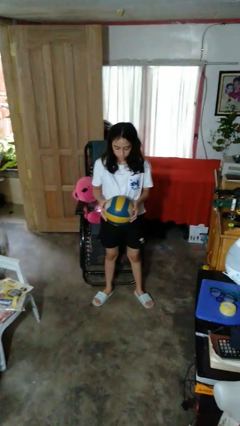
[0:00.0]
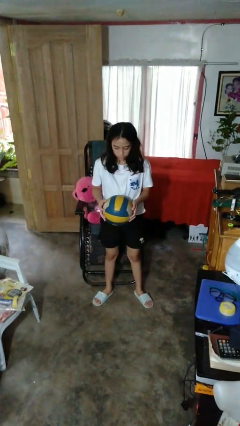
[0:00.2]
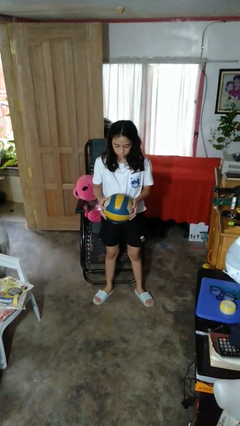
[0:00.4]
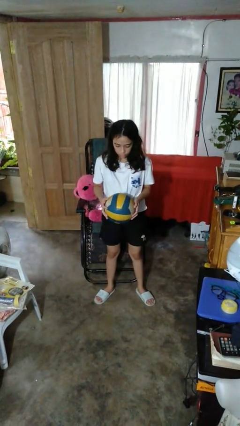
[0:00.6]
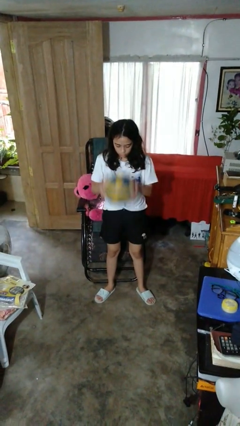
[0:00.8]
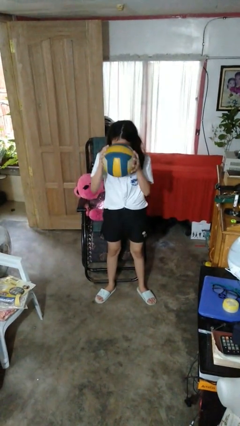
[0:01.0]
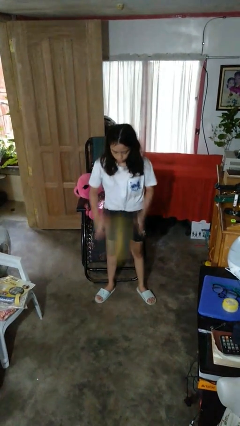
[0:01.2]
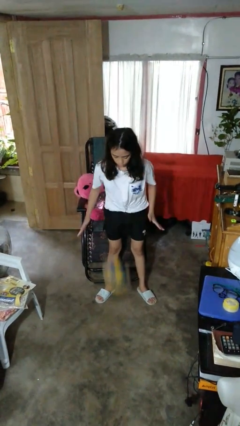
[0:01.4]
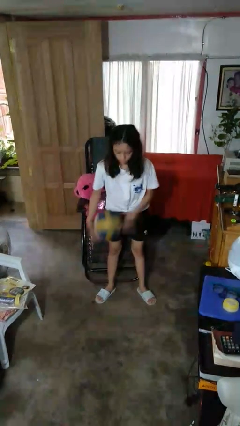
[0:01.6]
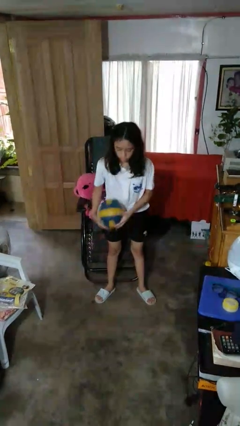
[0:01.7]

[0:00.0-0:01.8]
person bounces ball on floor

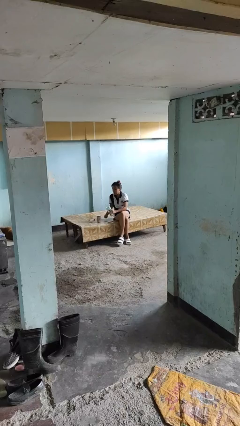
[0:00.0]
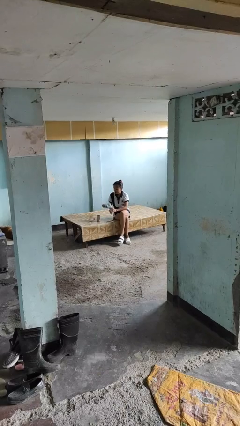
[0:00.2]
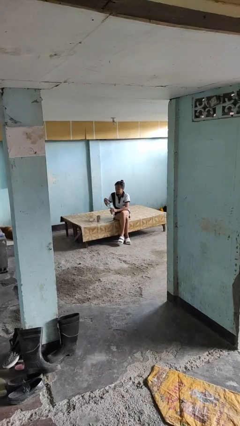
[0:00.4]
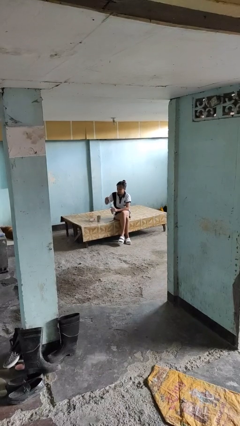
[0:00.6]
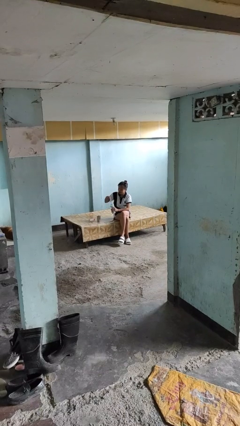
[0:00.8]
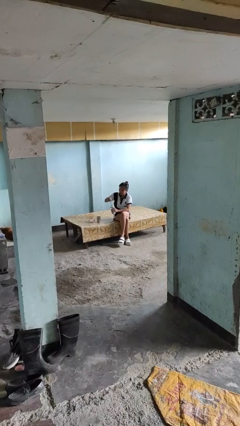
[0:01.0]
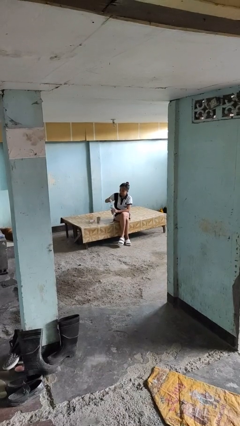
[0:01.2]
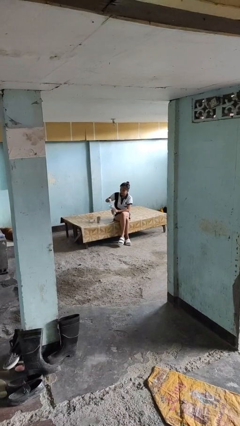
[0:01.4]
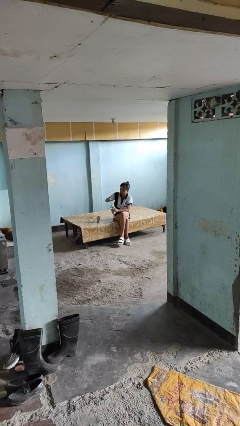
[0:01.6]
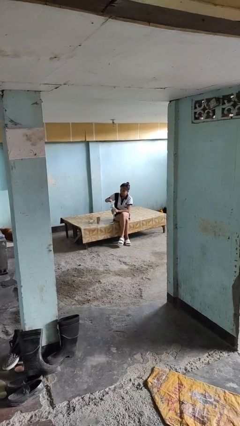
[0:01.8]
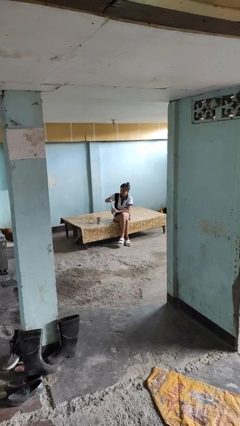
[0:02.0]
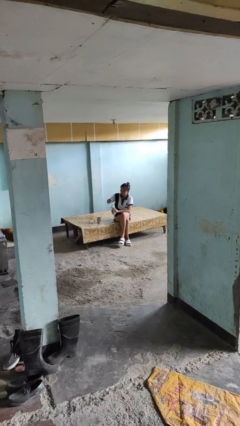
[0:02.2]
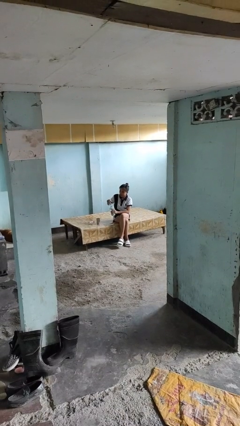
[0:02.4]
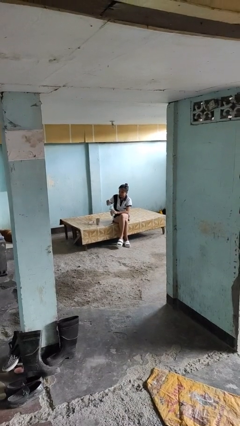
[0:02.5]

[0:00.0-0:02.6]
person screws lid to bottle

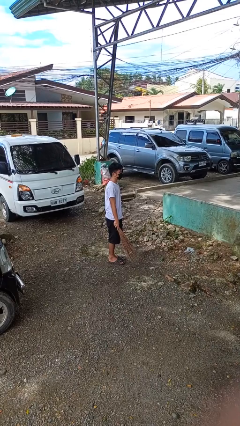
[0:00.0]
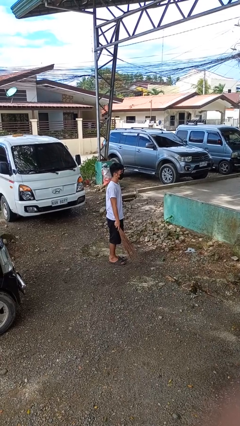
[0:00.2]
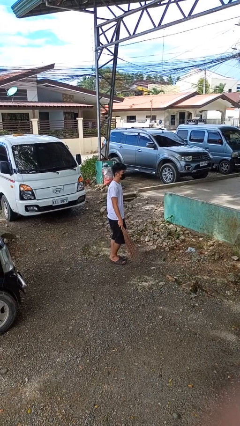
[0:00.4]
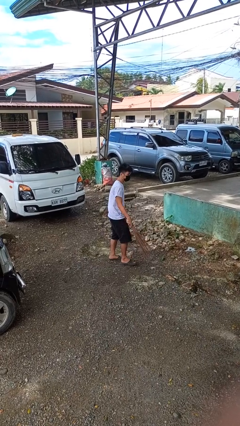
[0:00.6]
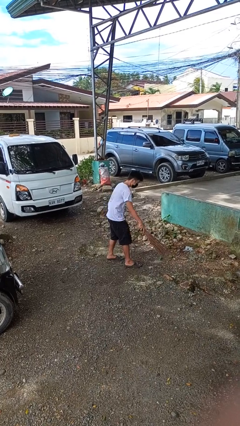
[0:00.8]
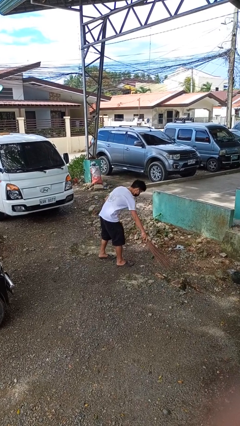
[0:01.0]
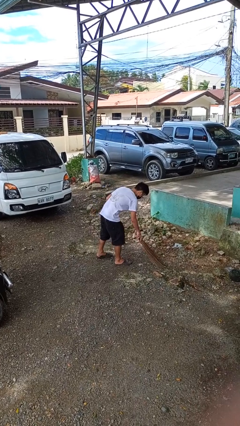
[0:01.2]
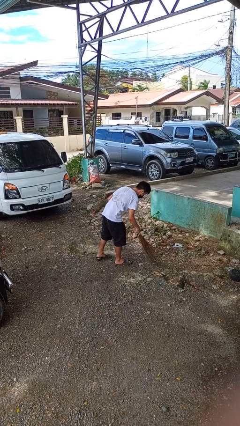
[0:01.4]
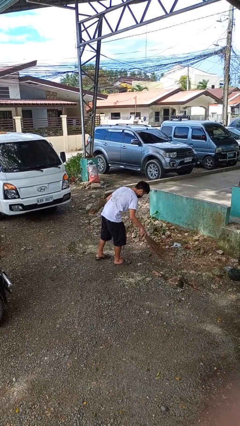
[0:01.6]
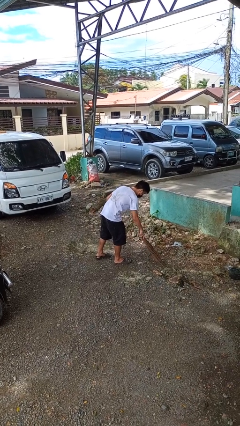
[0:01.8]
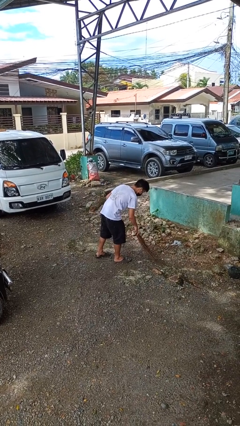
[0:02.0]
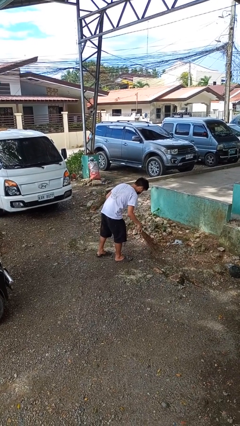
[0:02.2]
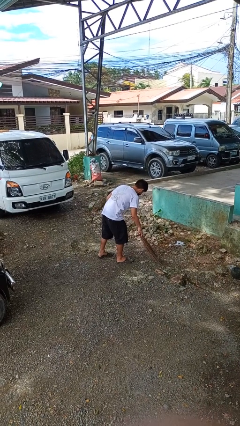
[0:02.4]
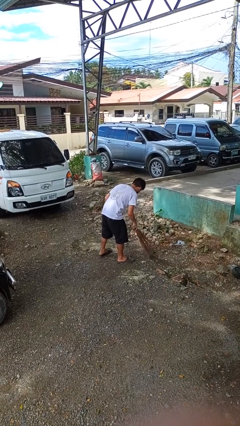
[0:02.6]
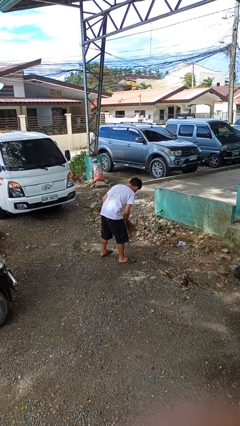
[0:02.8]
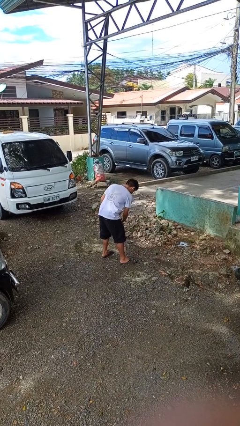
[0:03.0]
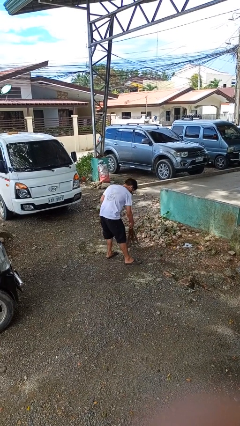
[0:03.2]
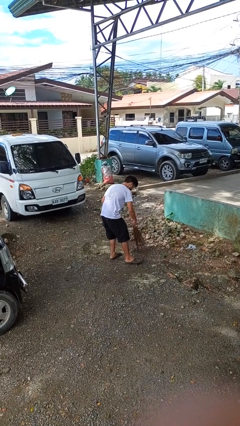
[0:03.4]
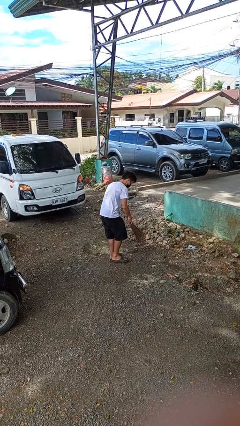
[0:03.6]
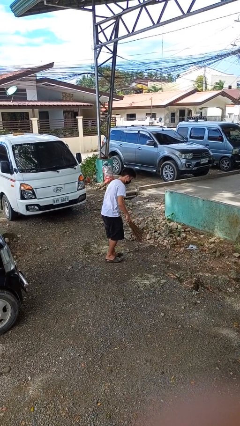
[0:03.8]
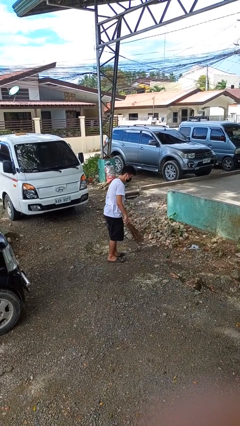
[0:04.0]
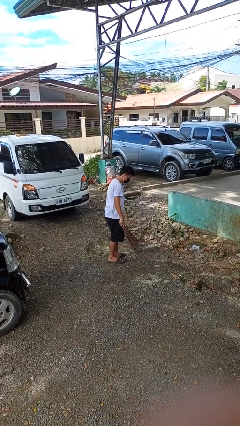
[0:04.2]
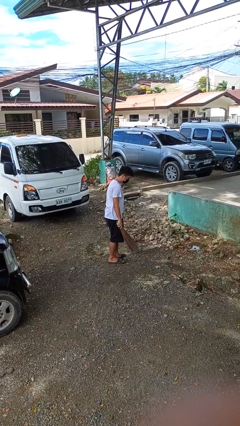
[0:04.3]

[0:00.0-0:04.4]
person sweeps floor

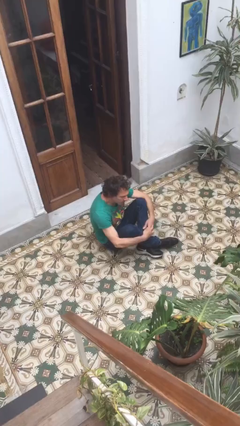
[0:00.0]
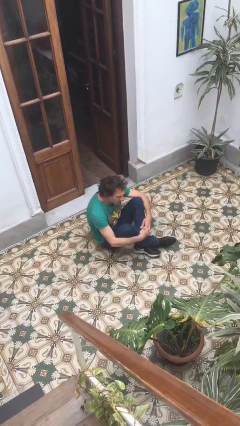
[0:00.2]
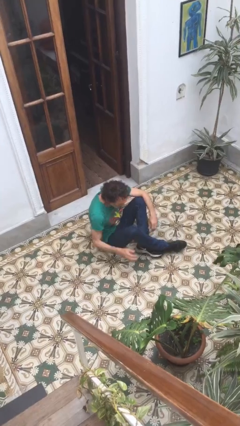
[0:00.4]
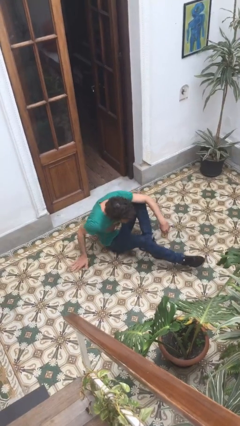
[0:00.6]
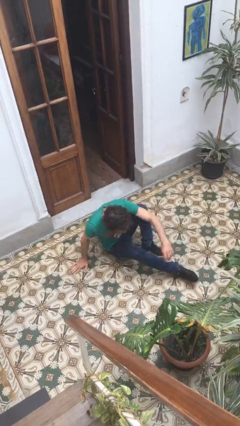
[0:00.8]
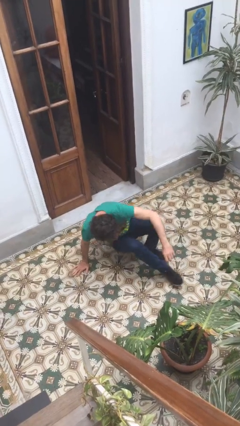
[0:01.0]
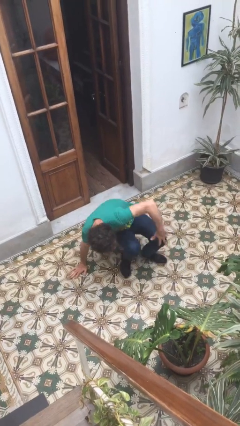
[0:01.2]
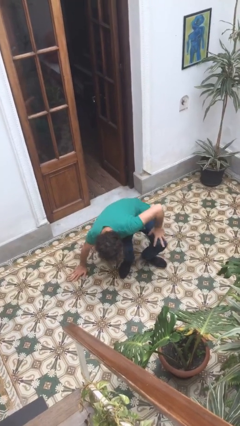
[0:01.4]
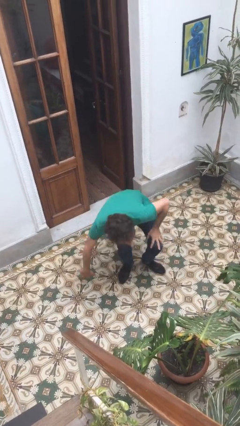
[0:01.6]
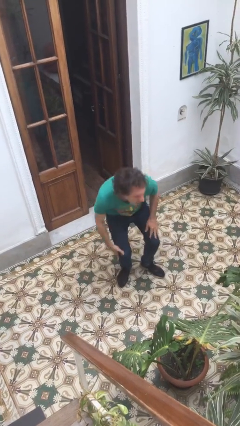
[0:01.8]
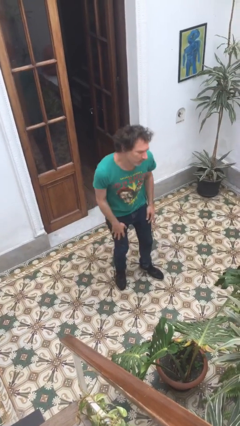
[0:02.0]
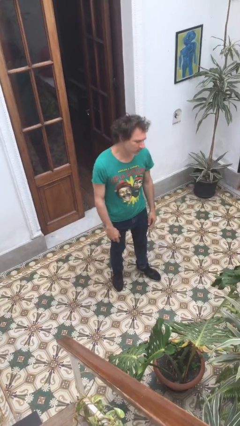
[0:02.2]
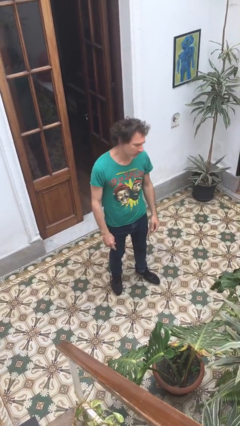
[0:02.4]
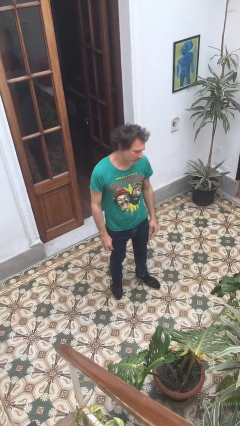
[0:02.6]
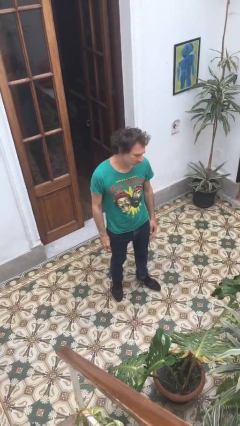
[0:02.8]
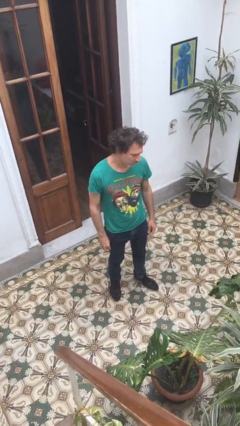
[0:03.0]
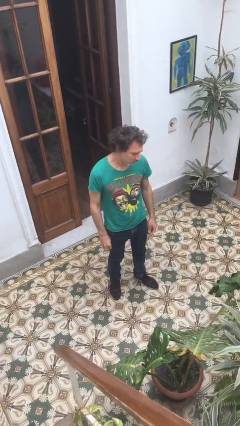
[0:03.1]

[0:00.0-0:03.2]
person stands up

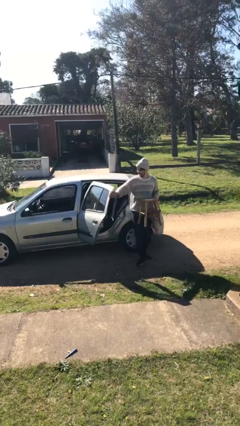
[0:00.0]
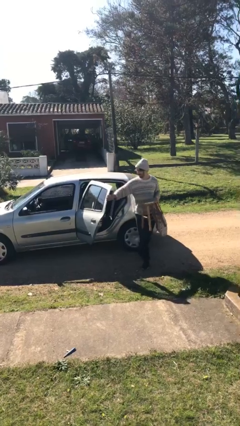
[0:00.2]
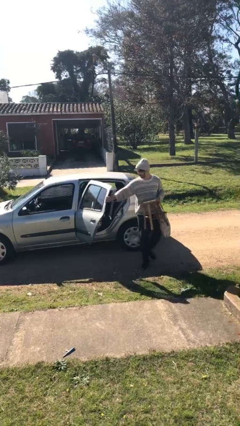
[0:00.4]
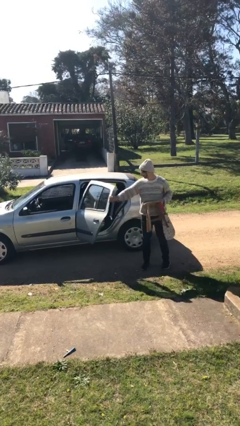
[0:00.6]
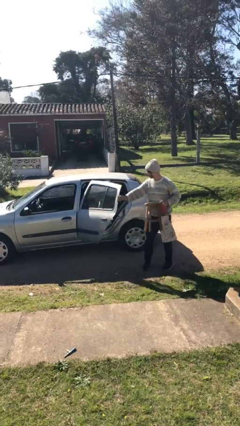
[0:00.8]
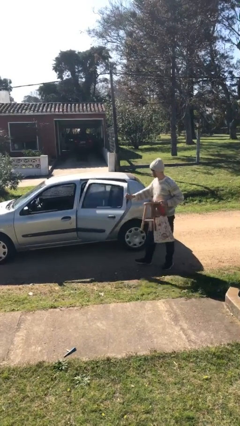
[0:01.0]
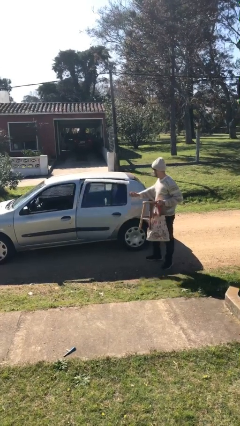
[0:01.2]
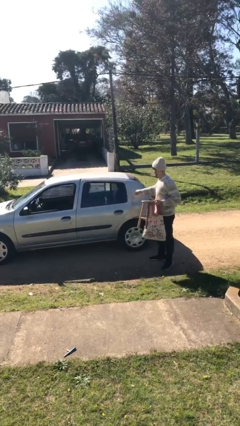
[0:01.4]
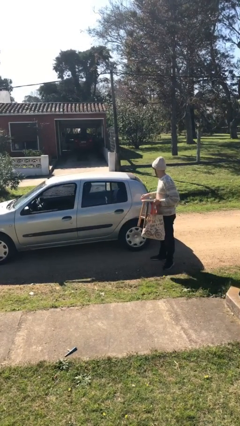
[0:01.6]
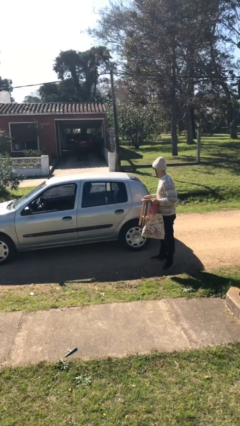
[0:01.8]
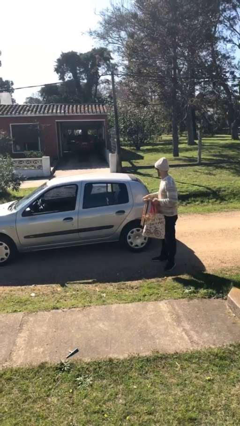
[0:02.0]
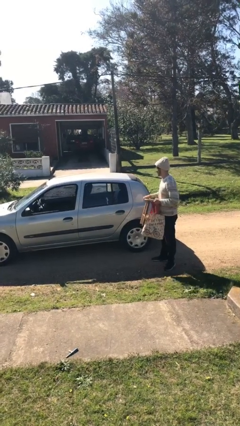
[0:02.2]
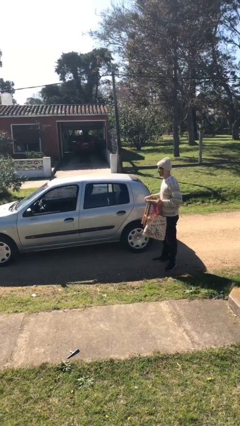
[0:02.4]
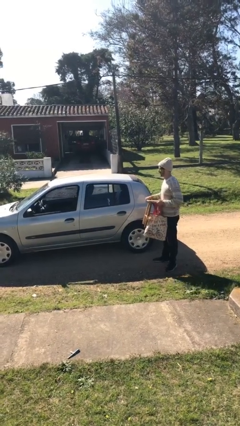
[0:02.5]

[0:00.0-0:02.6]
person closes car door

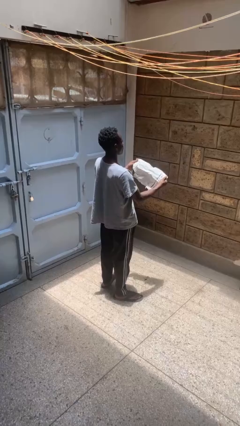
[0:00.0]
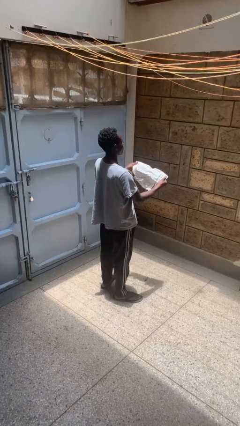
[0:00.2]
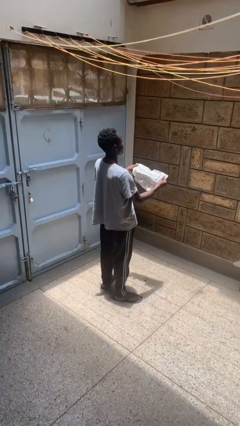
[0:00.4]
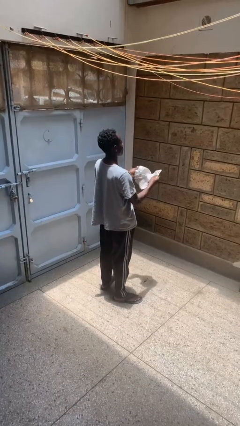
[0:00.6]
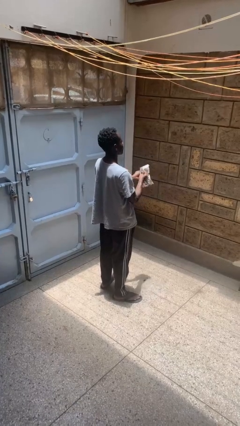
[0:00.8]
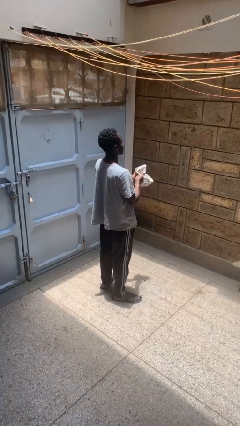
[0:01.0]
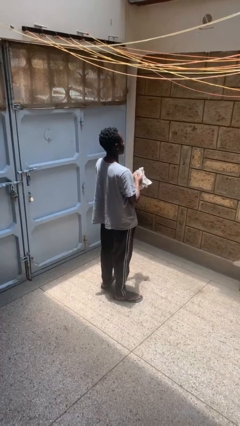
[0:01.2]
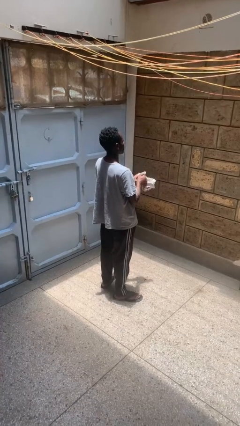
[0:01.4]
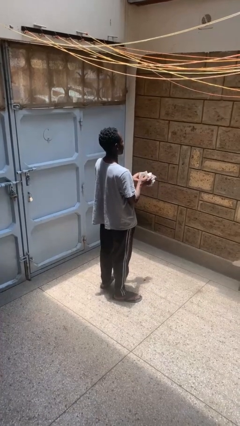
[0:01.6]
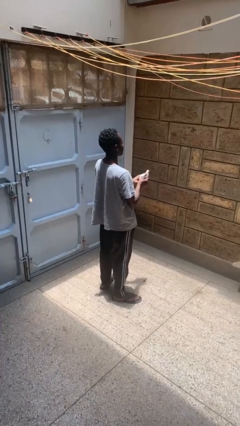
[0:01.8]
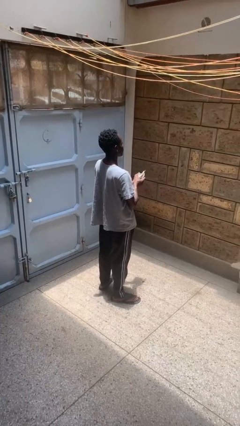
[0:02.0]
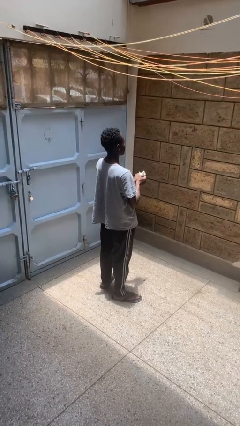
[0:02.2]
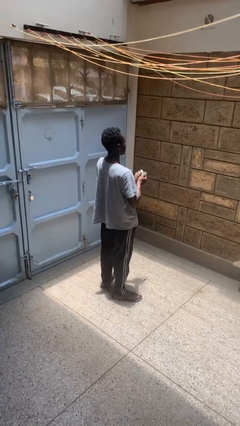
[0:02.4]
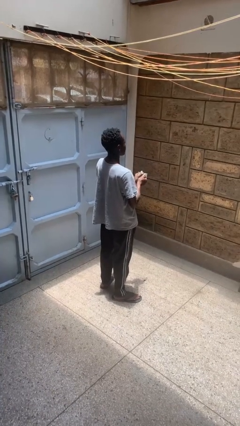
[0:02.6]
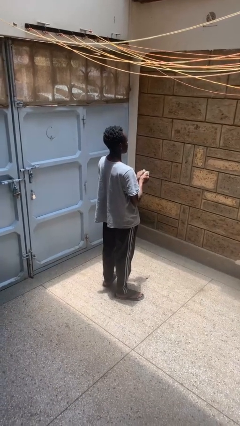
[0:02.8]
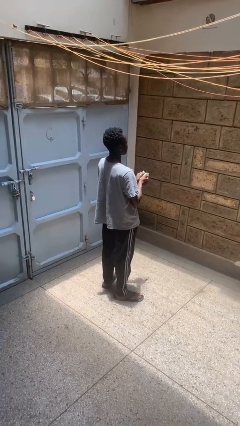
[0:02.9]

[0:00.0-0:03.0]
person crumples paper
